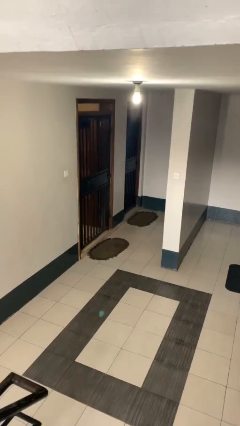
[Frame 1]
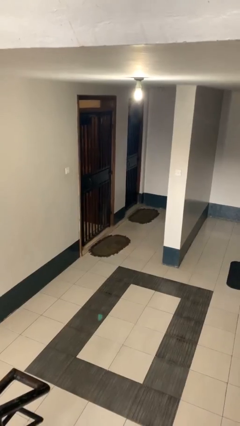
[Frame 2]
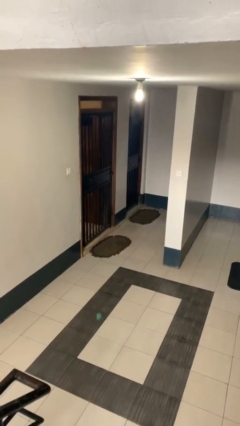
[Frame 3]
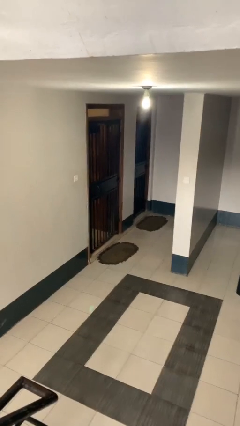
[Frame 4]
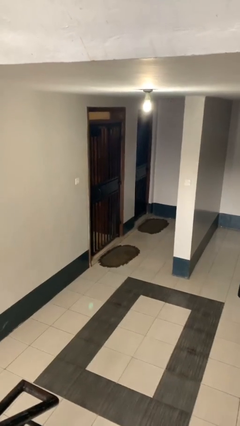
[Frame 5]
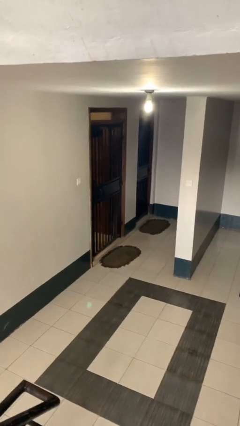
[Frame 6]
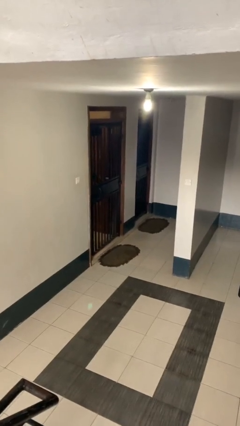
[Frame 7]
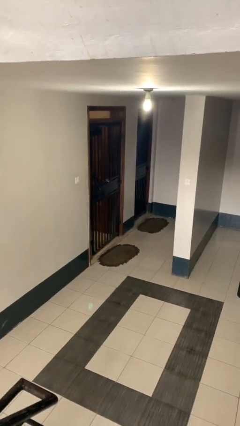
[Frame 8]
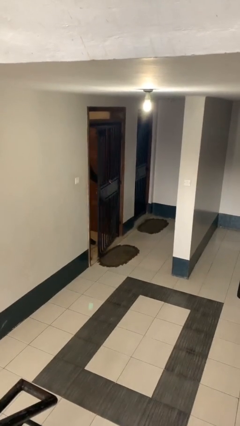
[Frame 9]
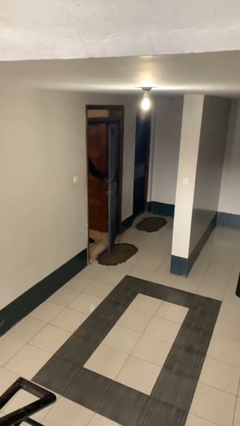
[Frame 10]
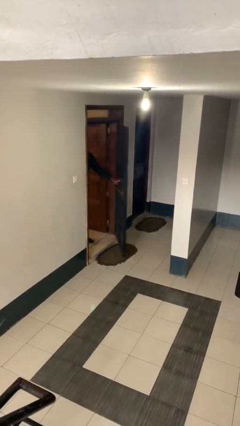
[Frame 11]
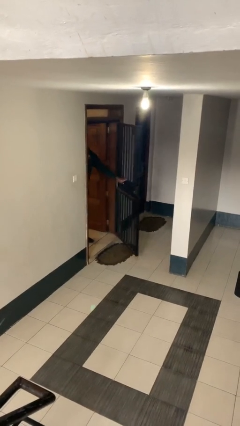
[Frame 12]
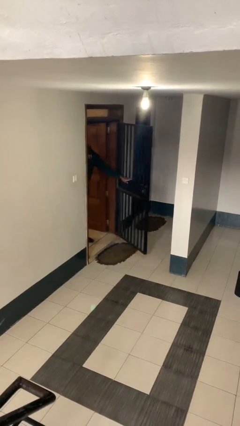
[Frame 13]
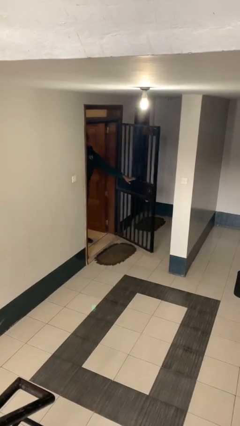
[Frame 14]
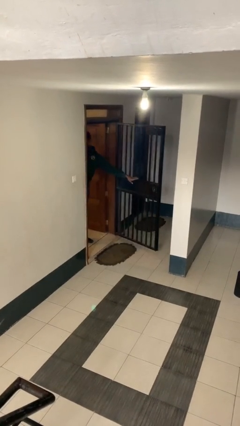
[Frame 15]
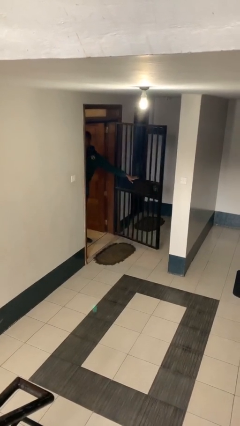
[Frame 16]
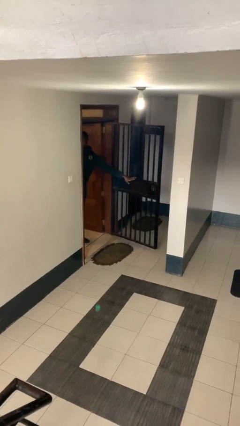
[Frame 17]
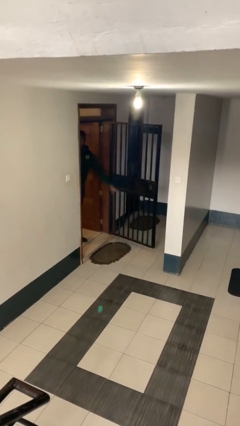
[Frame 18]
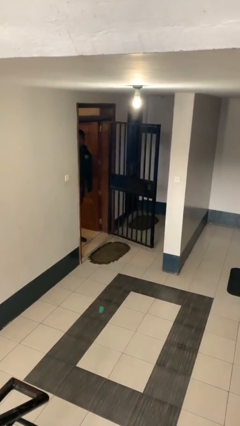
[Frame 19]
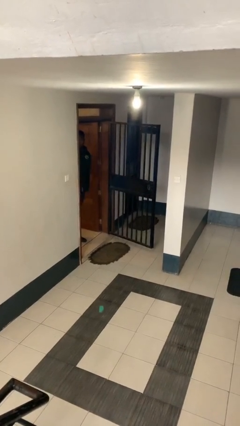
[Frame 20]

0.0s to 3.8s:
person opens facility door

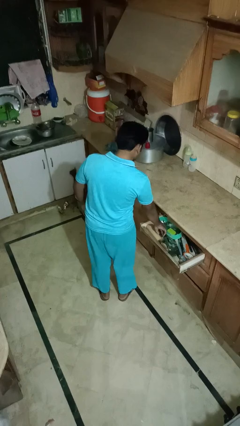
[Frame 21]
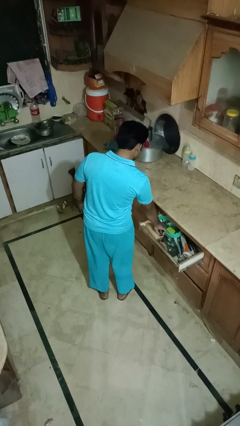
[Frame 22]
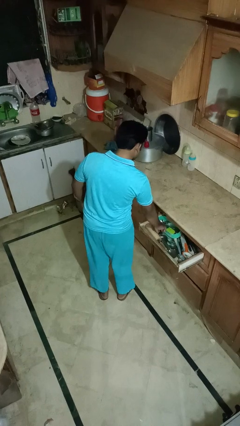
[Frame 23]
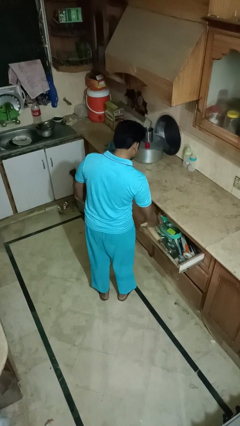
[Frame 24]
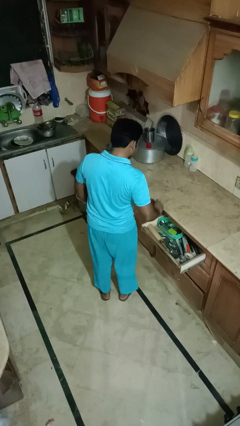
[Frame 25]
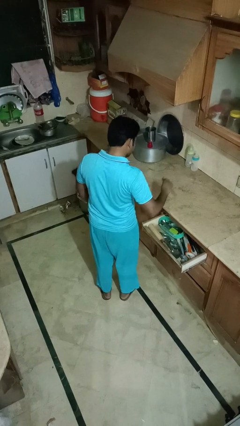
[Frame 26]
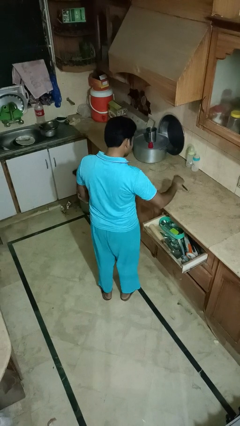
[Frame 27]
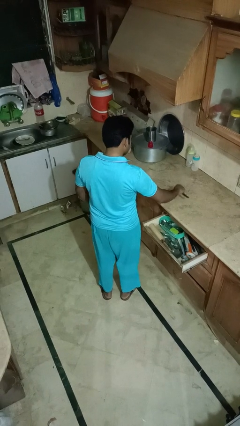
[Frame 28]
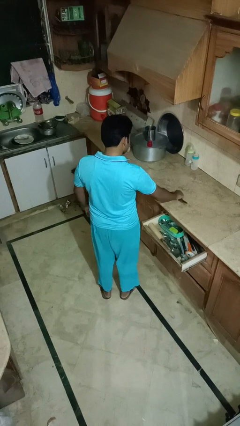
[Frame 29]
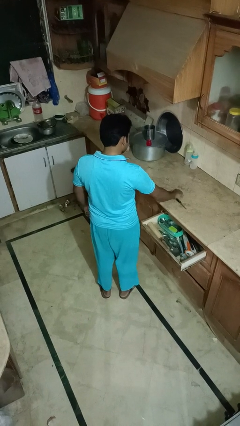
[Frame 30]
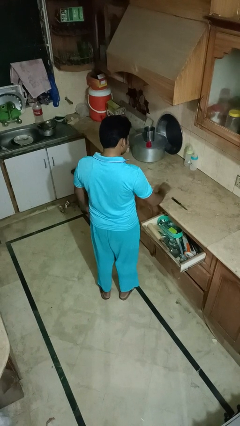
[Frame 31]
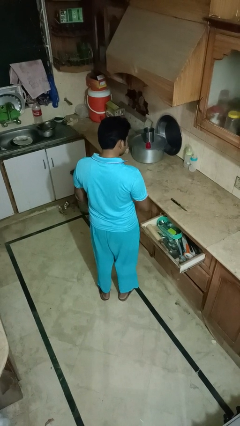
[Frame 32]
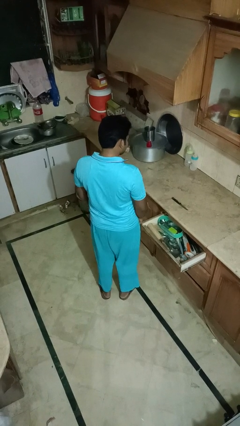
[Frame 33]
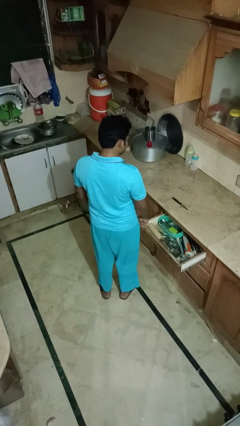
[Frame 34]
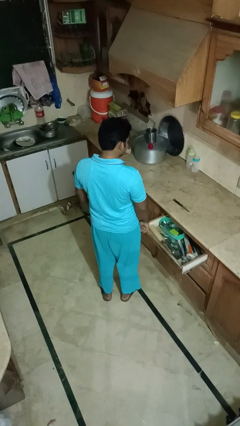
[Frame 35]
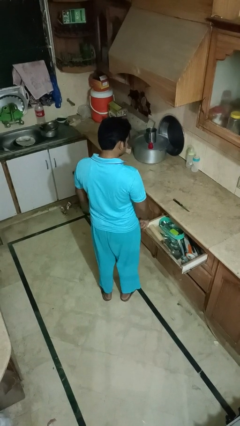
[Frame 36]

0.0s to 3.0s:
person takes object from kitchen drawer

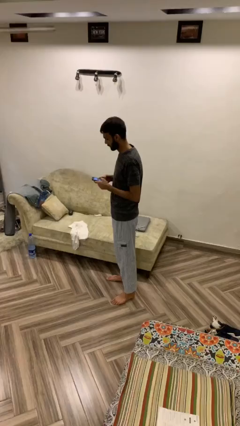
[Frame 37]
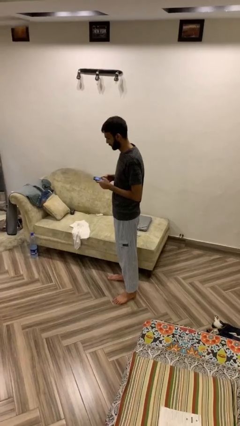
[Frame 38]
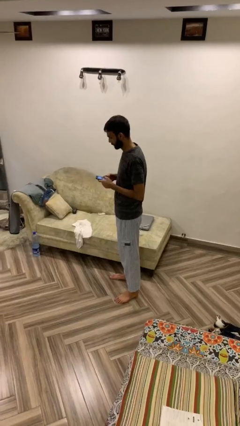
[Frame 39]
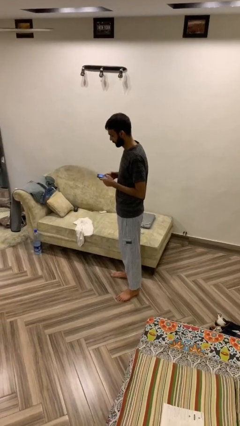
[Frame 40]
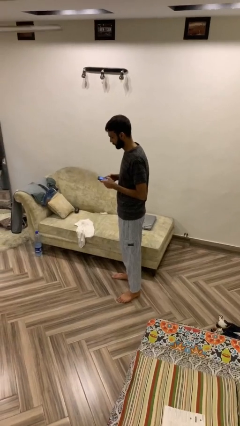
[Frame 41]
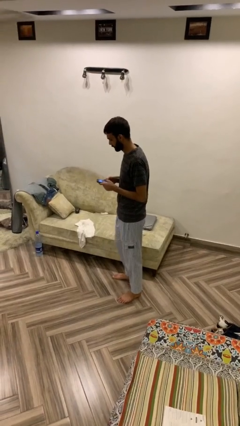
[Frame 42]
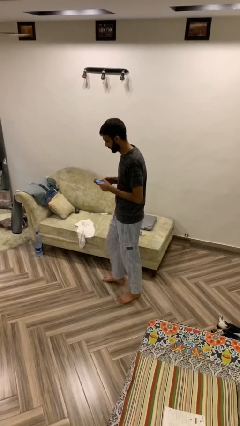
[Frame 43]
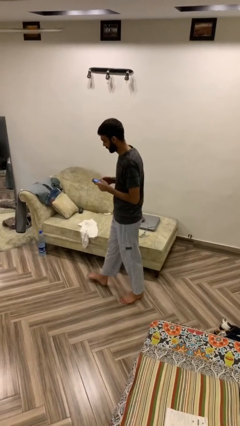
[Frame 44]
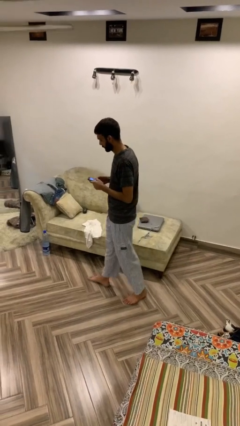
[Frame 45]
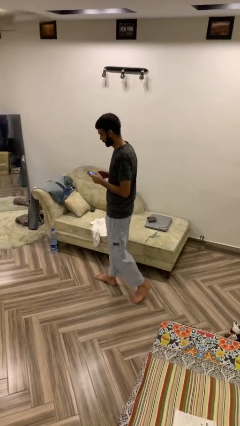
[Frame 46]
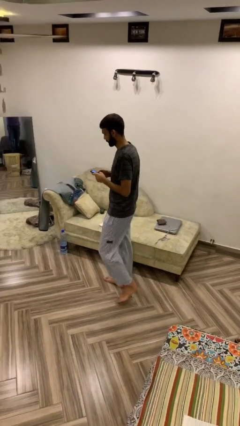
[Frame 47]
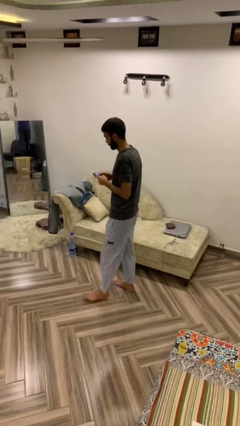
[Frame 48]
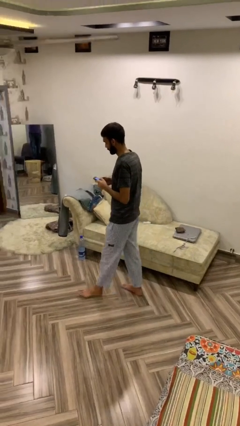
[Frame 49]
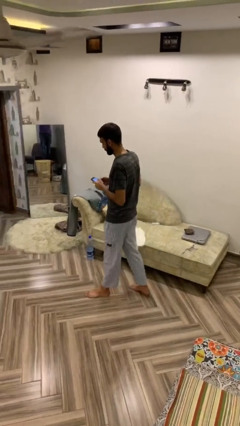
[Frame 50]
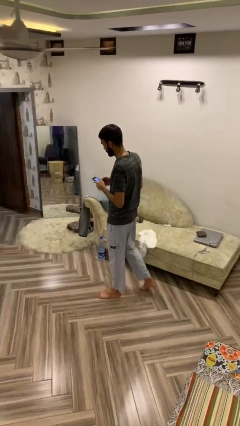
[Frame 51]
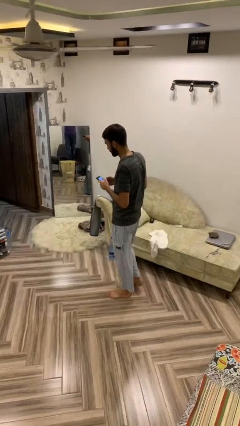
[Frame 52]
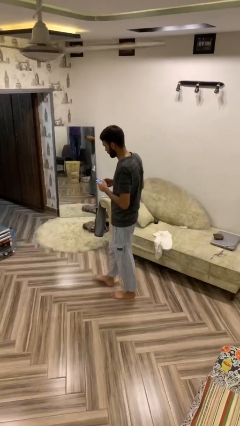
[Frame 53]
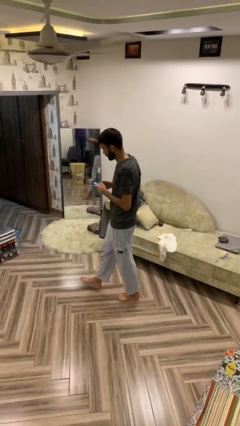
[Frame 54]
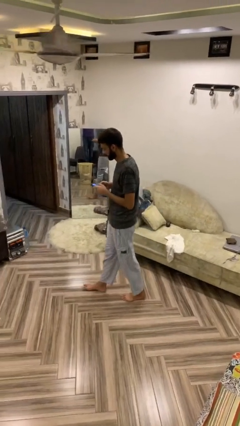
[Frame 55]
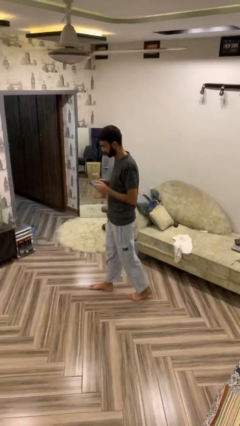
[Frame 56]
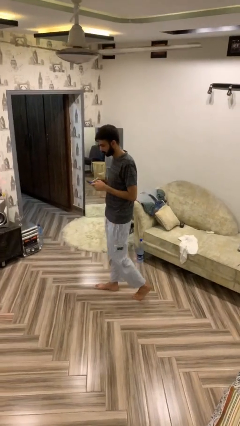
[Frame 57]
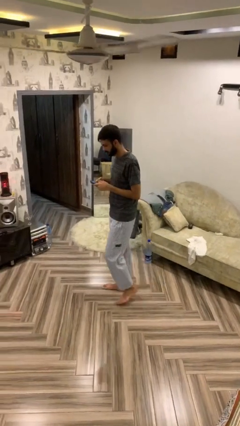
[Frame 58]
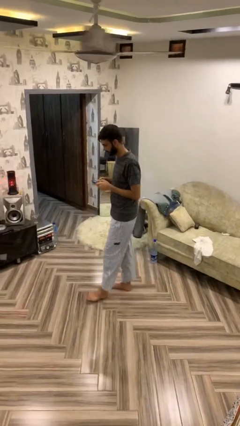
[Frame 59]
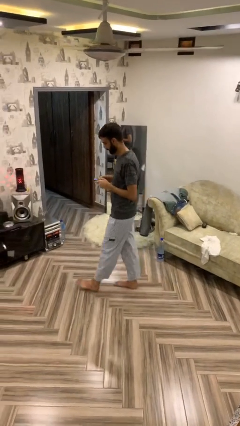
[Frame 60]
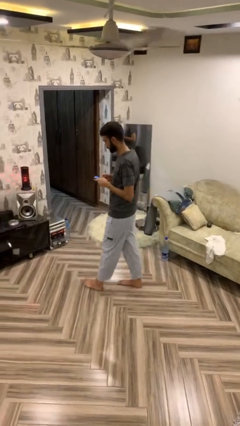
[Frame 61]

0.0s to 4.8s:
person texts on phone

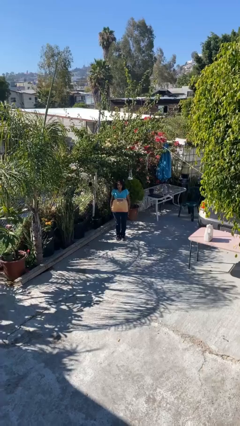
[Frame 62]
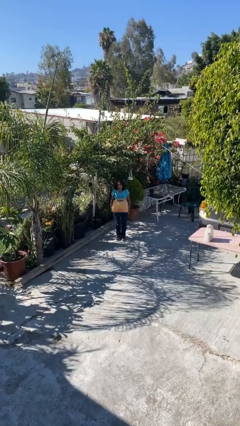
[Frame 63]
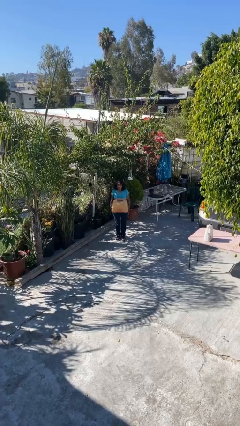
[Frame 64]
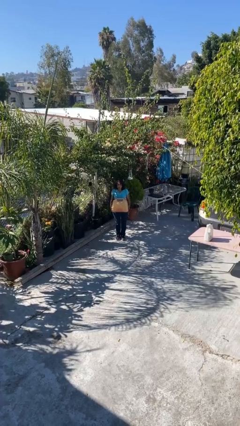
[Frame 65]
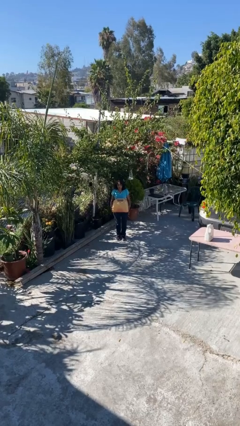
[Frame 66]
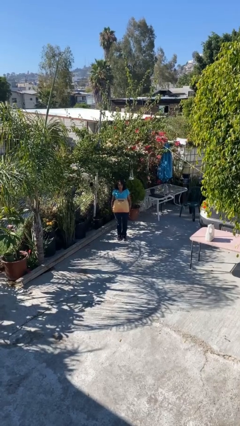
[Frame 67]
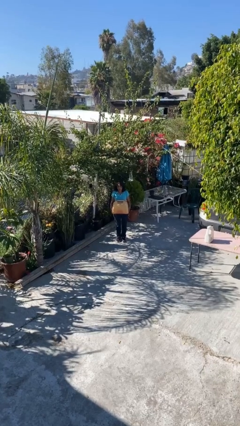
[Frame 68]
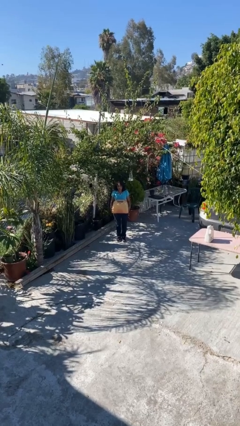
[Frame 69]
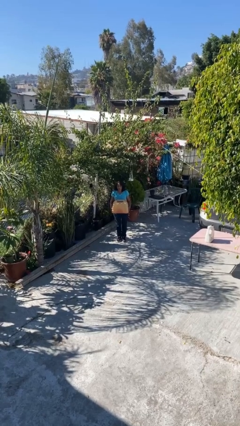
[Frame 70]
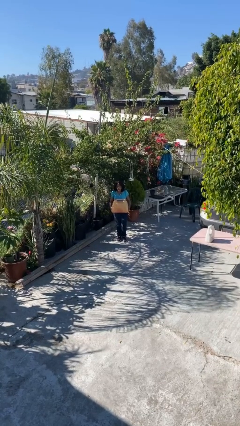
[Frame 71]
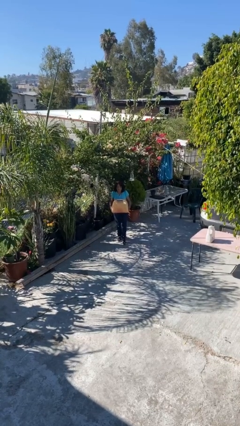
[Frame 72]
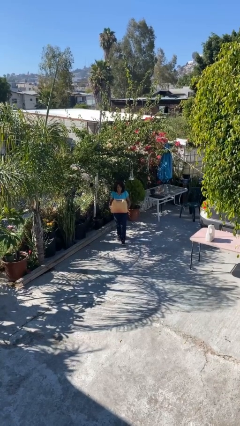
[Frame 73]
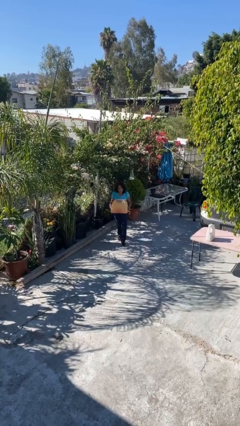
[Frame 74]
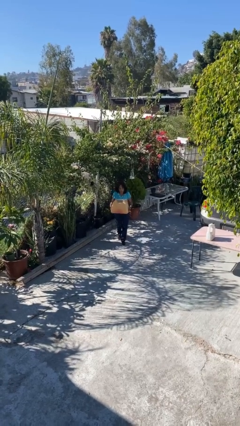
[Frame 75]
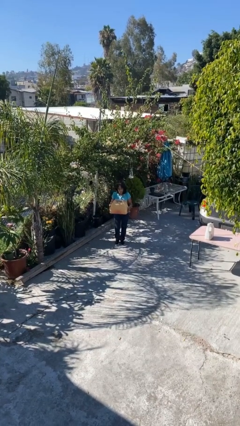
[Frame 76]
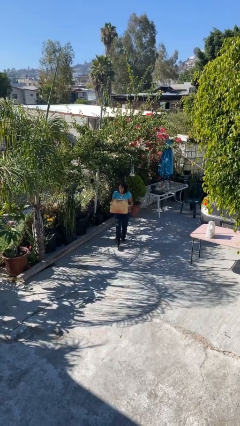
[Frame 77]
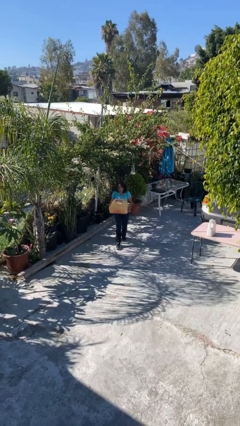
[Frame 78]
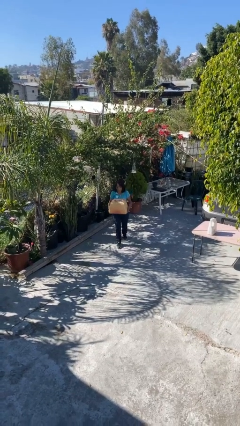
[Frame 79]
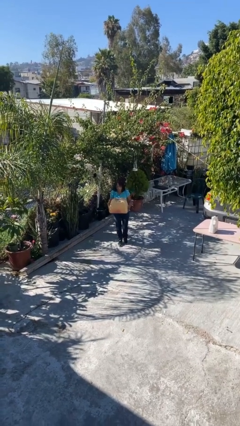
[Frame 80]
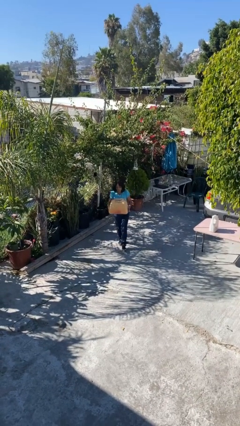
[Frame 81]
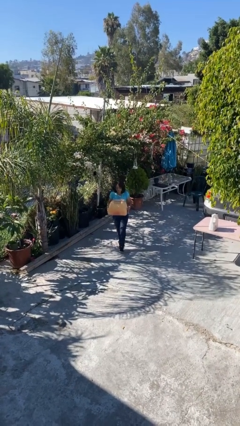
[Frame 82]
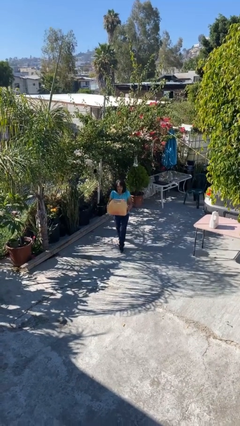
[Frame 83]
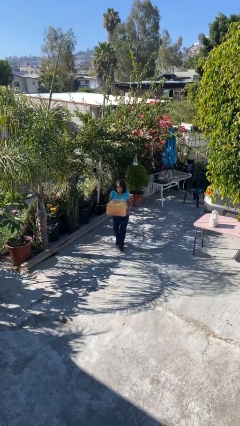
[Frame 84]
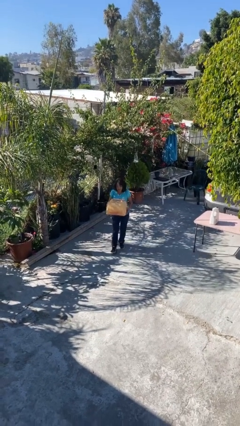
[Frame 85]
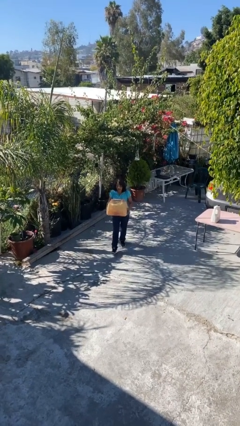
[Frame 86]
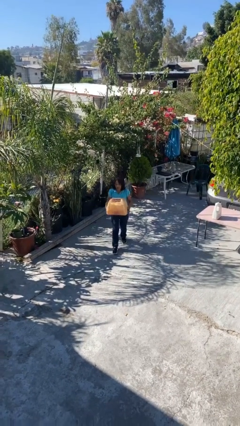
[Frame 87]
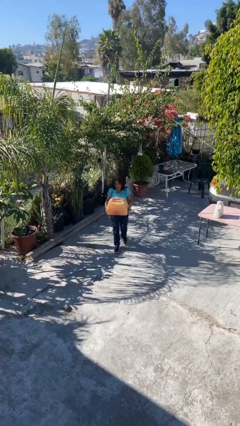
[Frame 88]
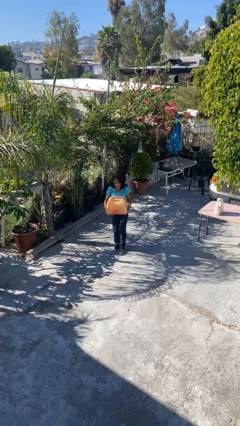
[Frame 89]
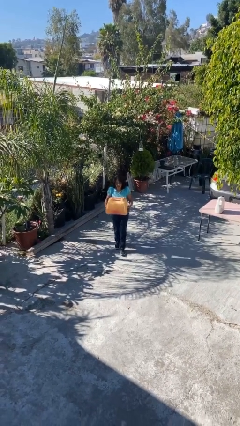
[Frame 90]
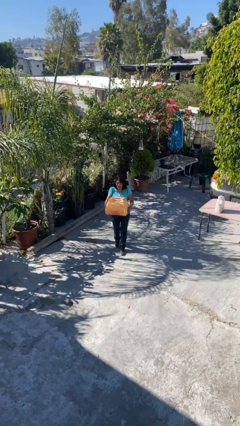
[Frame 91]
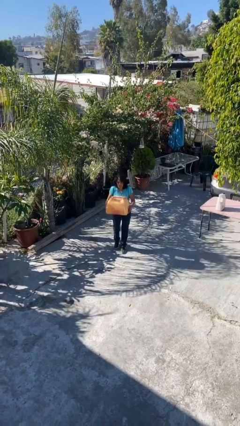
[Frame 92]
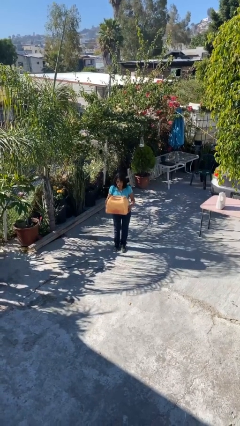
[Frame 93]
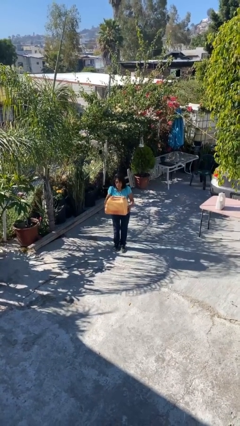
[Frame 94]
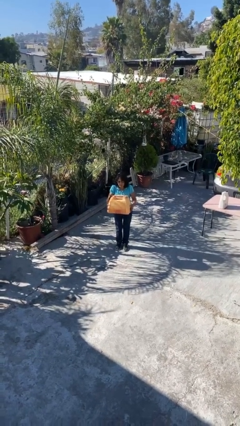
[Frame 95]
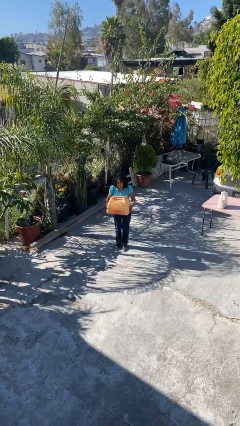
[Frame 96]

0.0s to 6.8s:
person carries heavy object
